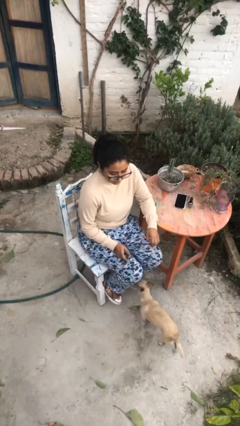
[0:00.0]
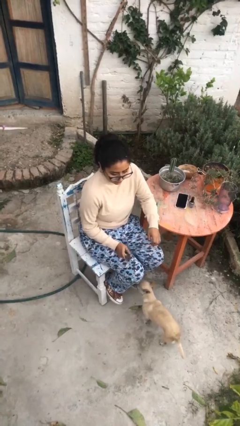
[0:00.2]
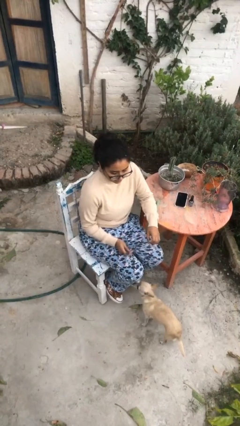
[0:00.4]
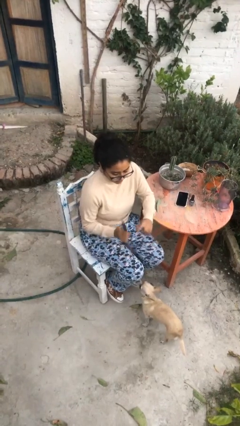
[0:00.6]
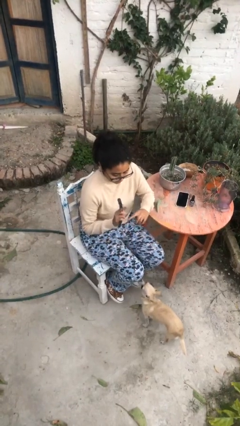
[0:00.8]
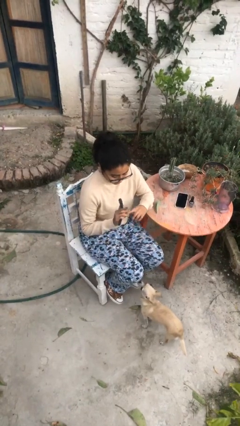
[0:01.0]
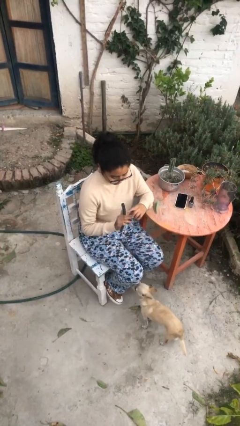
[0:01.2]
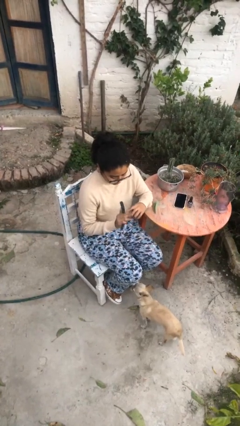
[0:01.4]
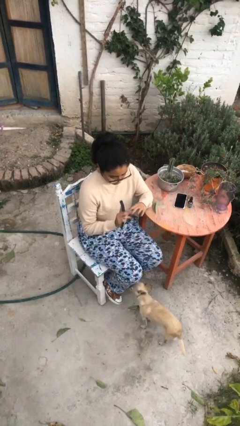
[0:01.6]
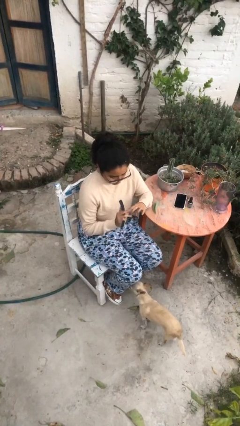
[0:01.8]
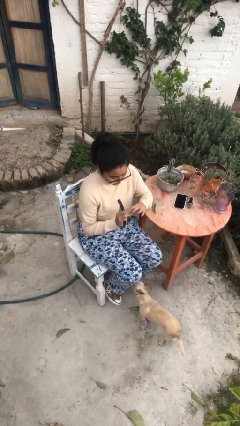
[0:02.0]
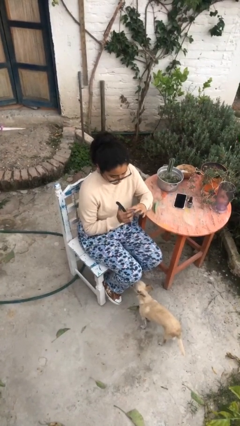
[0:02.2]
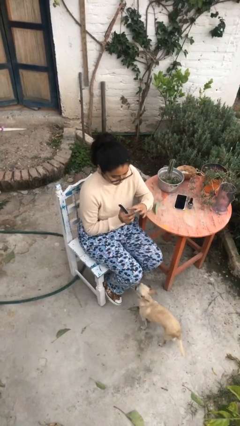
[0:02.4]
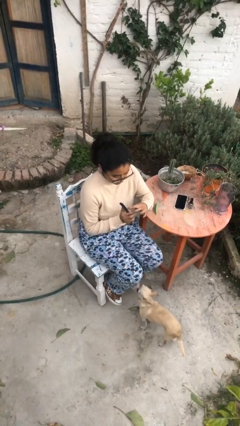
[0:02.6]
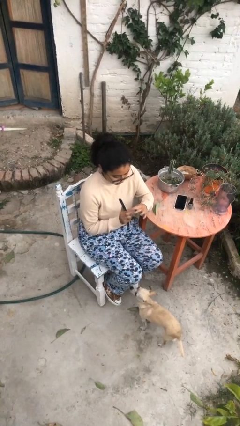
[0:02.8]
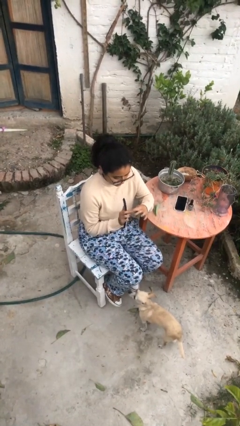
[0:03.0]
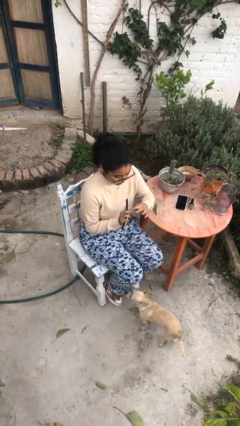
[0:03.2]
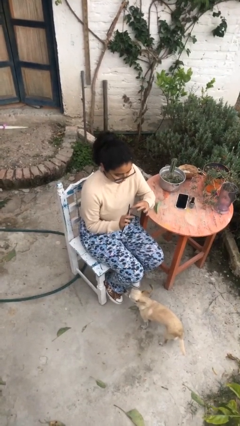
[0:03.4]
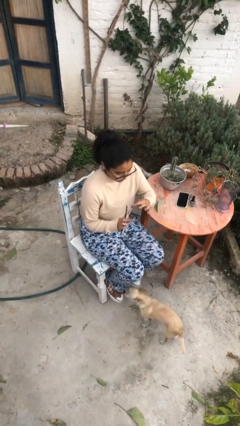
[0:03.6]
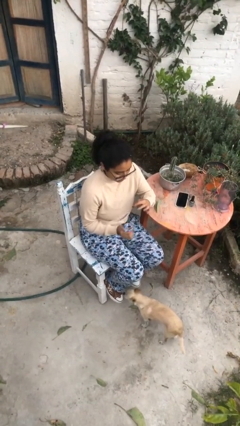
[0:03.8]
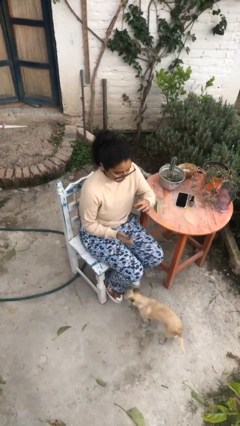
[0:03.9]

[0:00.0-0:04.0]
person files fingernails

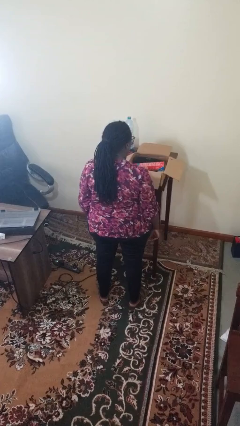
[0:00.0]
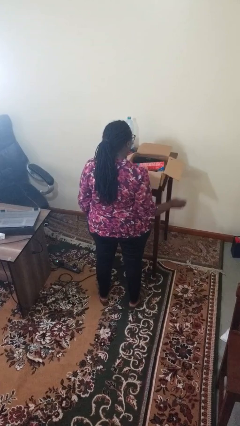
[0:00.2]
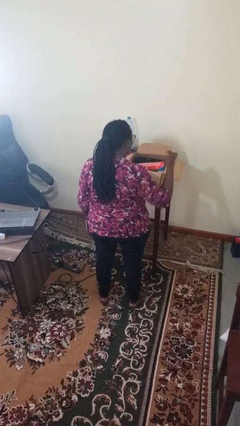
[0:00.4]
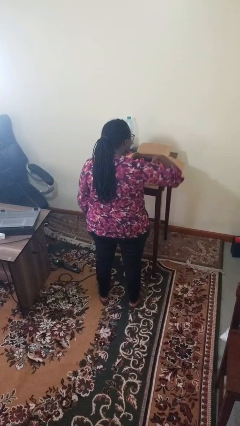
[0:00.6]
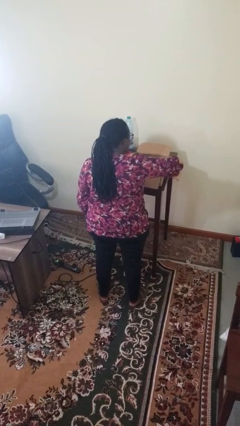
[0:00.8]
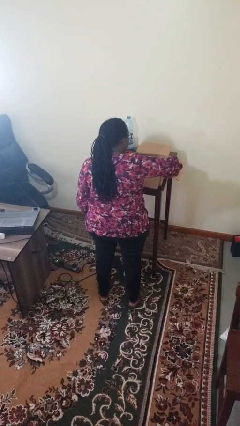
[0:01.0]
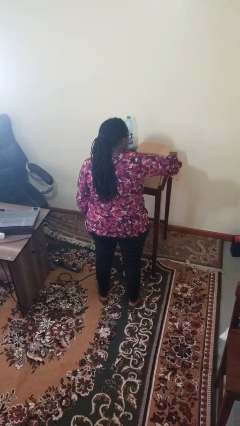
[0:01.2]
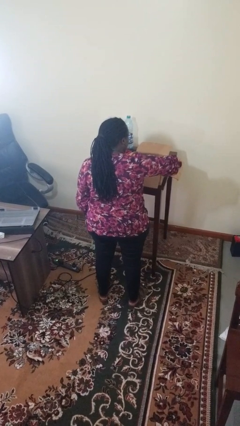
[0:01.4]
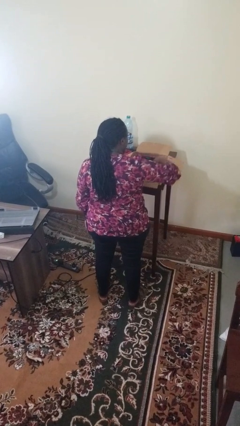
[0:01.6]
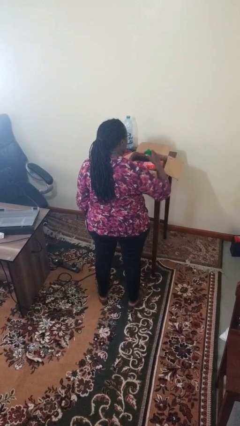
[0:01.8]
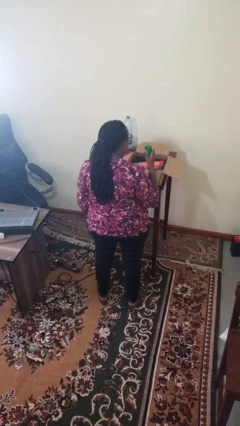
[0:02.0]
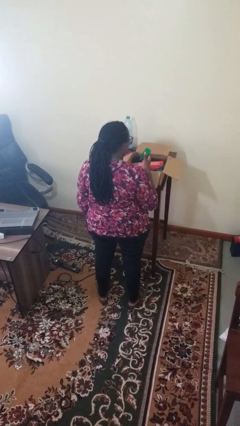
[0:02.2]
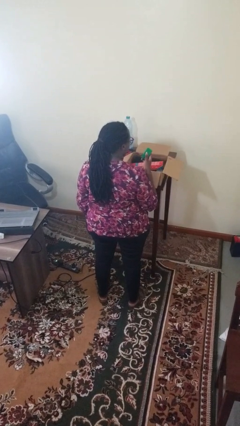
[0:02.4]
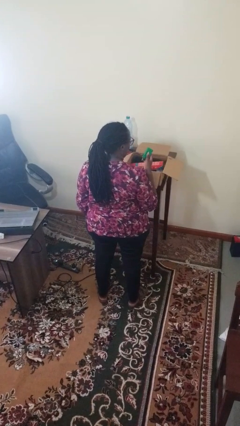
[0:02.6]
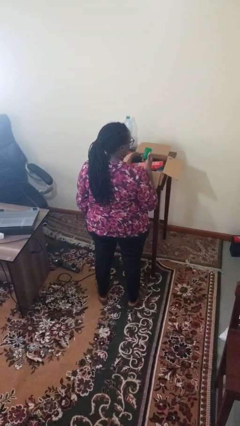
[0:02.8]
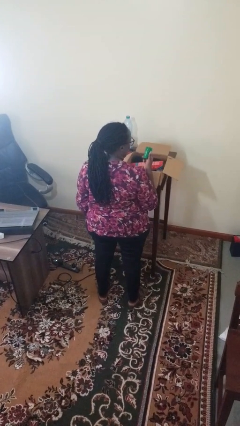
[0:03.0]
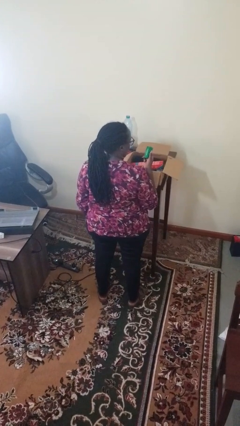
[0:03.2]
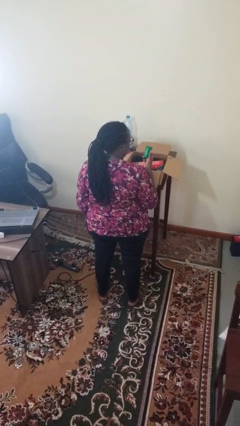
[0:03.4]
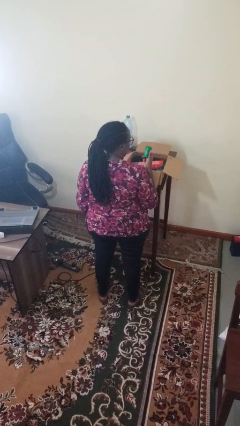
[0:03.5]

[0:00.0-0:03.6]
person takes object from box

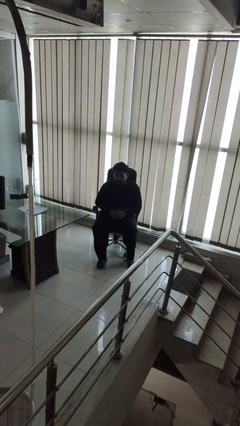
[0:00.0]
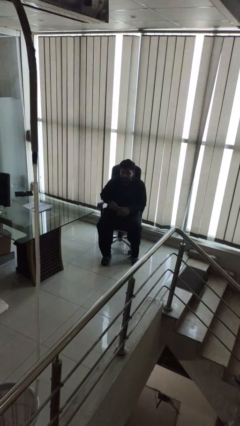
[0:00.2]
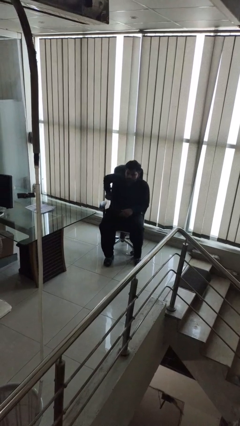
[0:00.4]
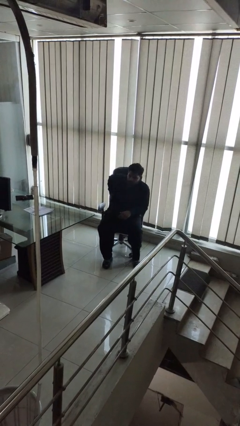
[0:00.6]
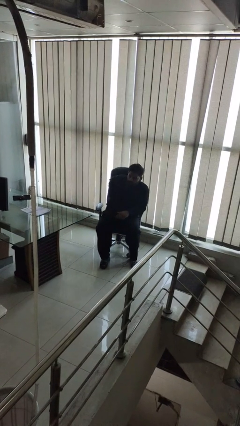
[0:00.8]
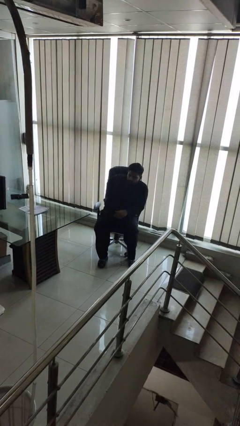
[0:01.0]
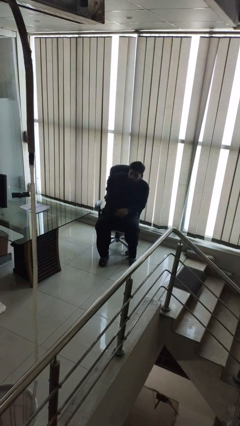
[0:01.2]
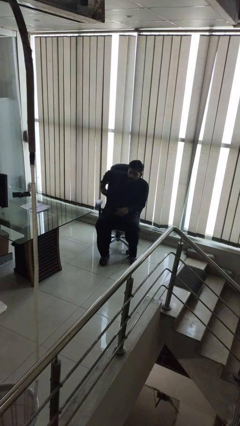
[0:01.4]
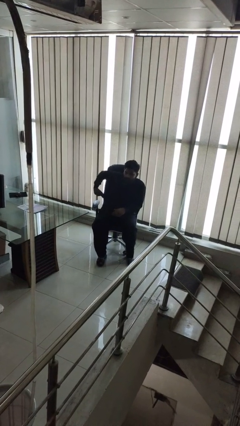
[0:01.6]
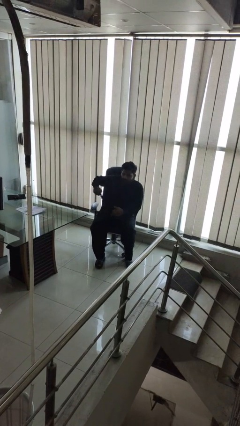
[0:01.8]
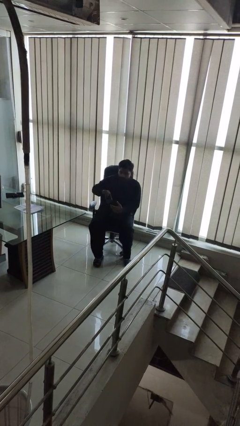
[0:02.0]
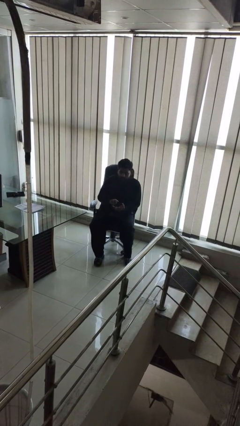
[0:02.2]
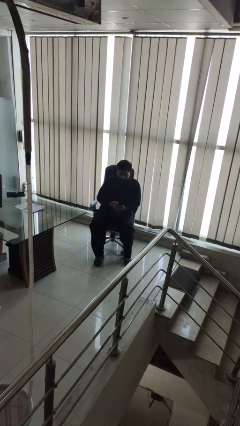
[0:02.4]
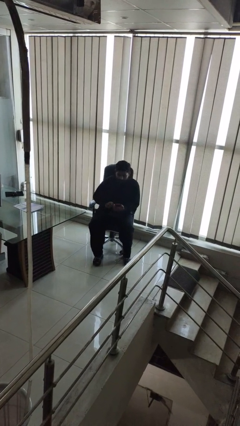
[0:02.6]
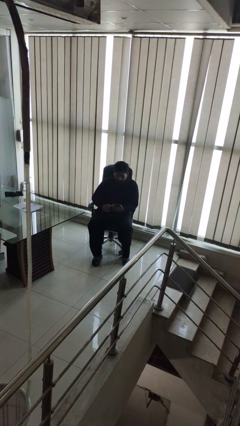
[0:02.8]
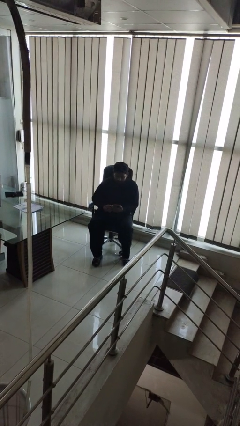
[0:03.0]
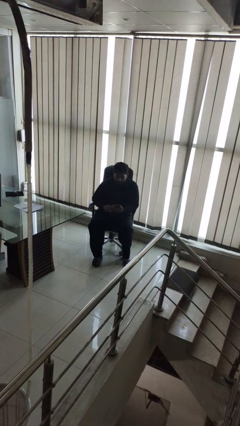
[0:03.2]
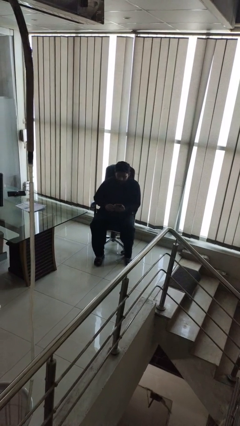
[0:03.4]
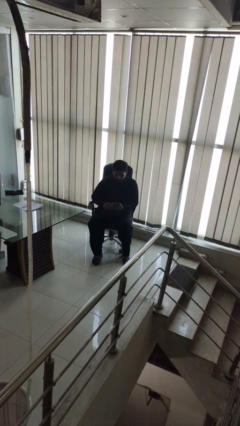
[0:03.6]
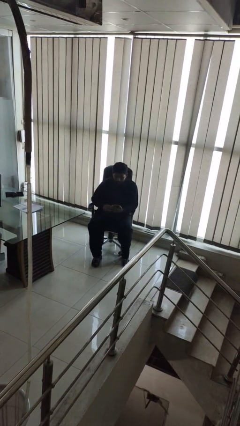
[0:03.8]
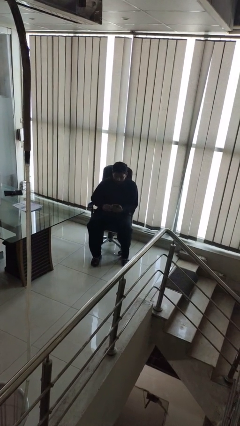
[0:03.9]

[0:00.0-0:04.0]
person takes phone from pocket

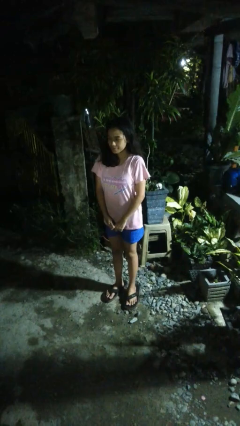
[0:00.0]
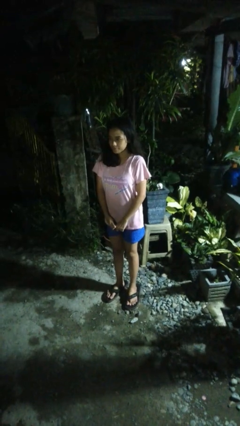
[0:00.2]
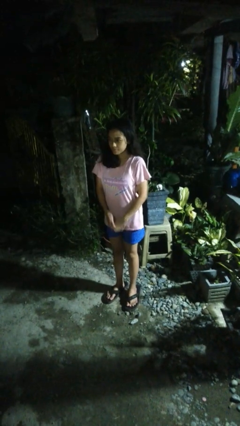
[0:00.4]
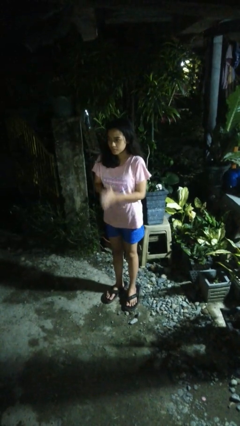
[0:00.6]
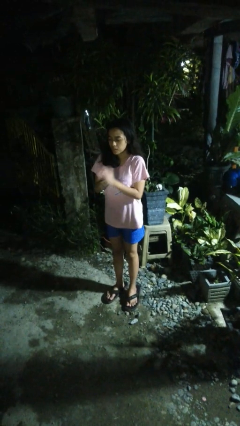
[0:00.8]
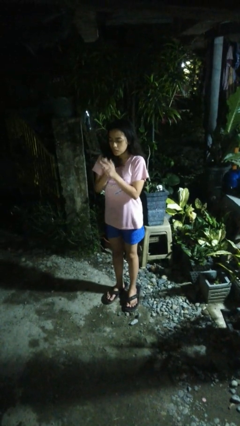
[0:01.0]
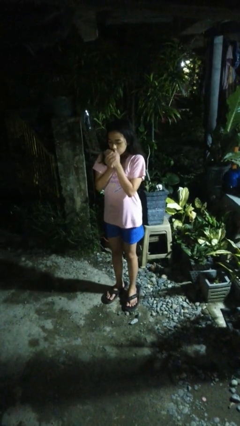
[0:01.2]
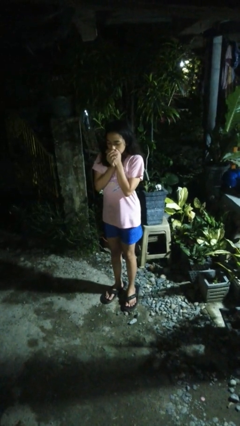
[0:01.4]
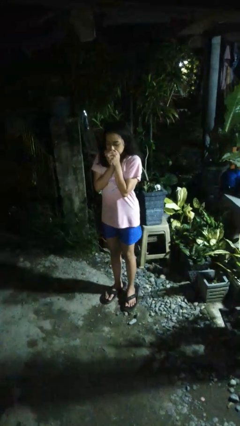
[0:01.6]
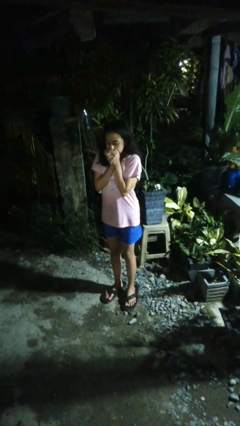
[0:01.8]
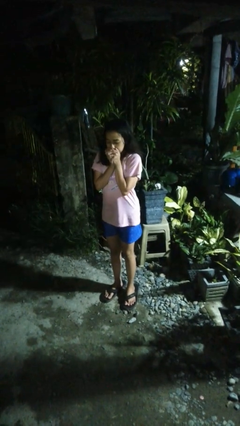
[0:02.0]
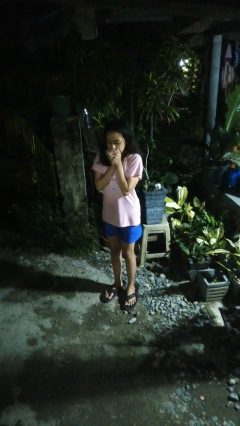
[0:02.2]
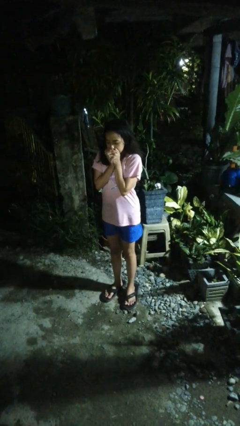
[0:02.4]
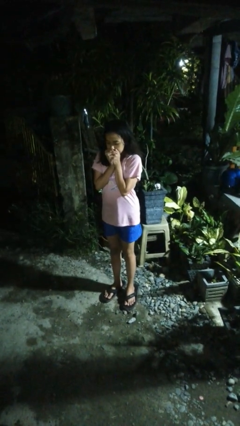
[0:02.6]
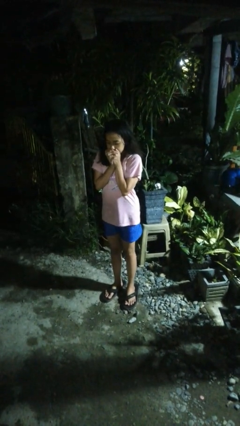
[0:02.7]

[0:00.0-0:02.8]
person blows into hands

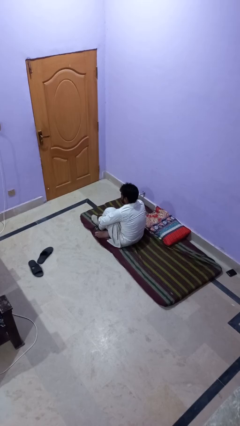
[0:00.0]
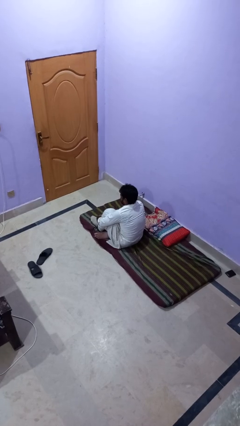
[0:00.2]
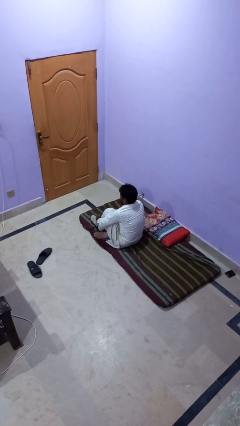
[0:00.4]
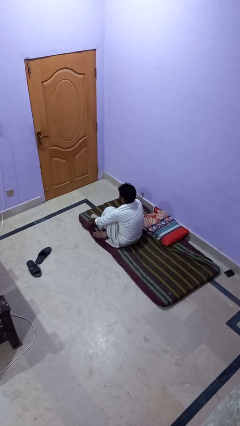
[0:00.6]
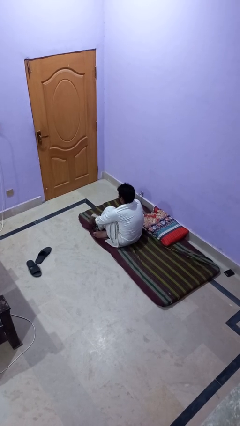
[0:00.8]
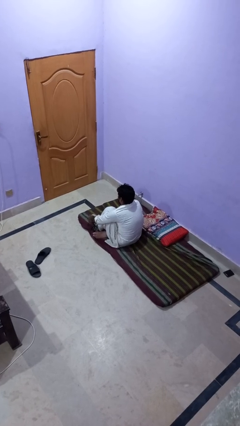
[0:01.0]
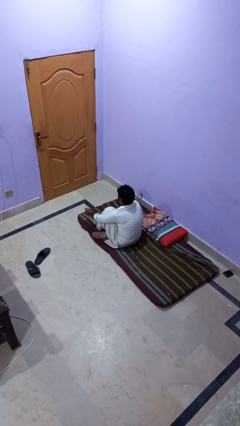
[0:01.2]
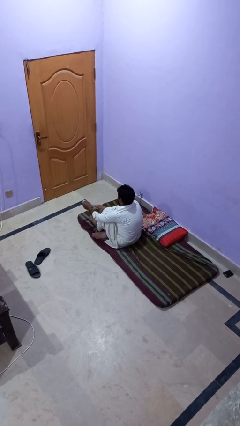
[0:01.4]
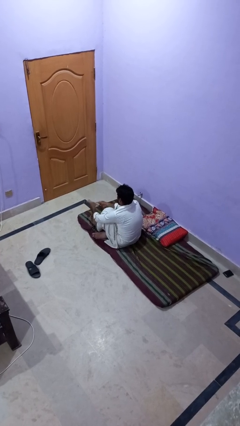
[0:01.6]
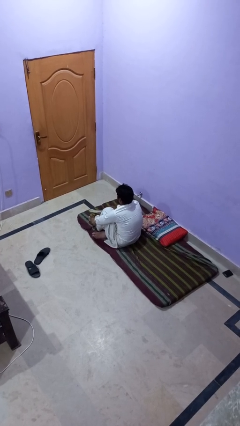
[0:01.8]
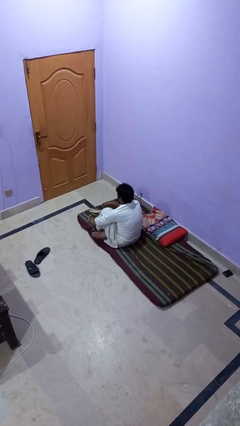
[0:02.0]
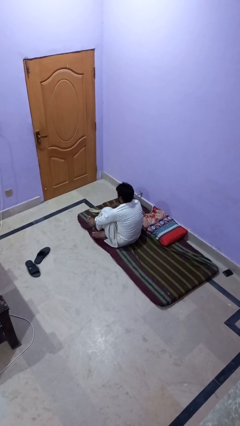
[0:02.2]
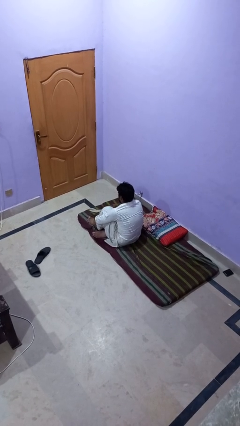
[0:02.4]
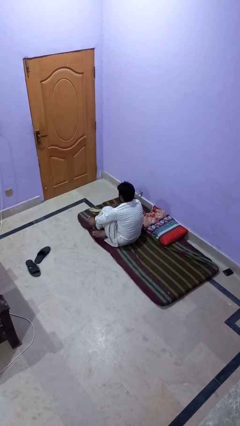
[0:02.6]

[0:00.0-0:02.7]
person takes off socks

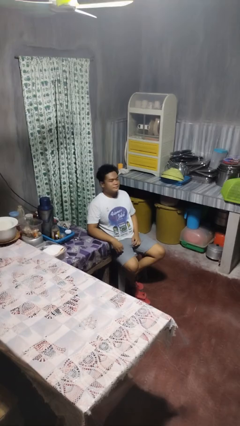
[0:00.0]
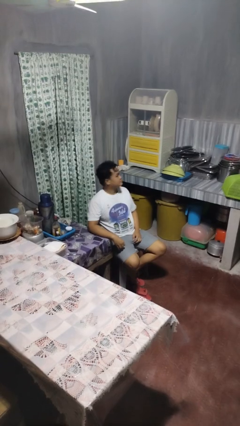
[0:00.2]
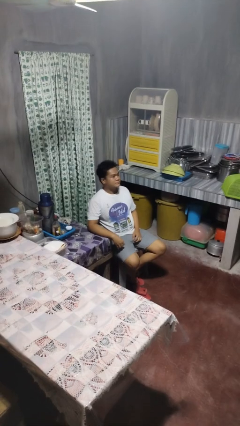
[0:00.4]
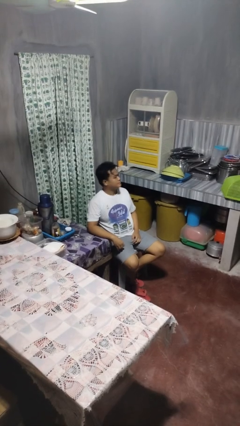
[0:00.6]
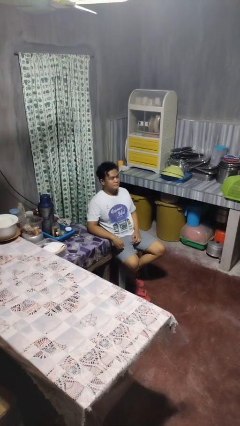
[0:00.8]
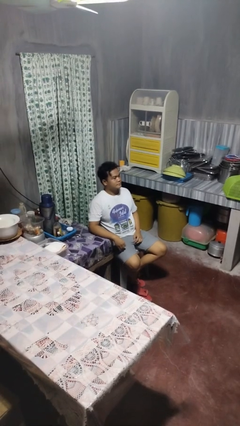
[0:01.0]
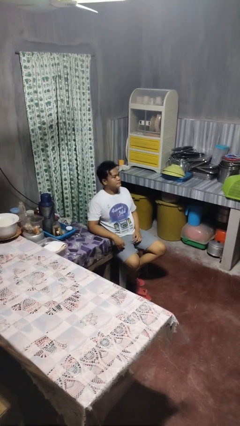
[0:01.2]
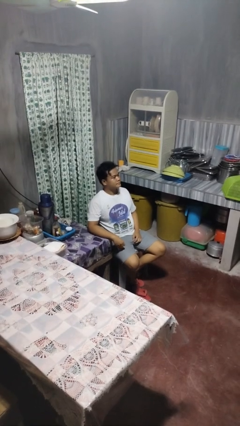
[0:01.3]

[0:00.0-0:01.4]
person shakes head
